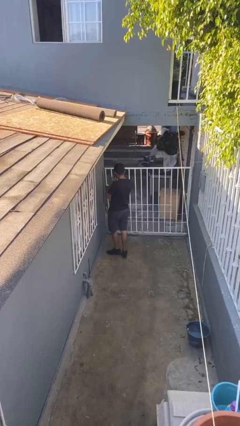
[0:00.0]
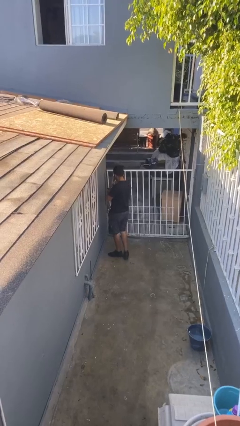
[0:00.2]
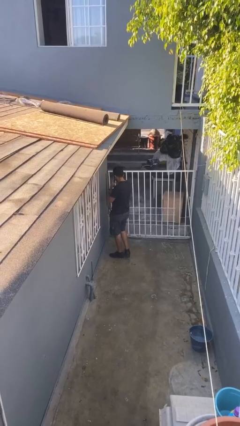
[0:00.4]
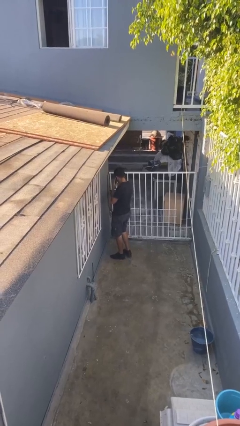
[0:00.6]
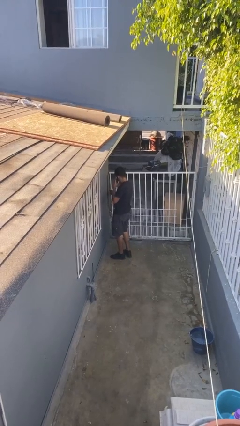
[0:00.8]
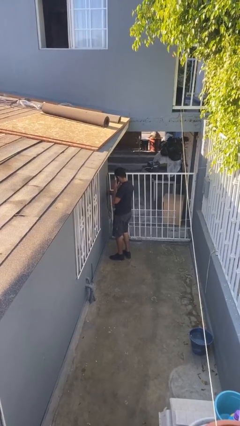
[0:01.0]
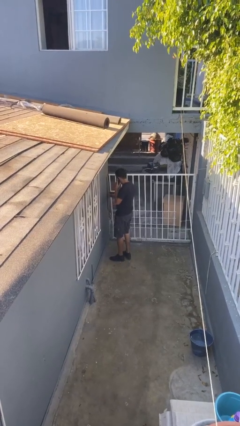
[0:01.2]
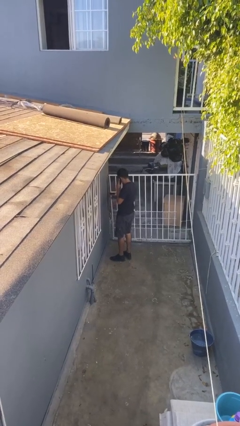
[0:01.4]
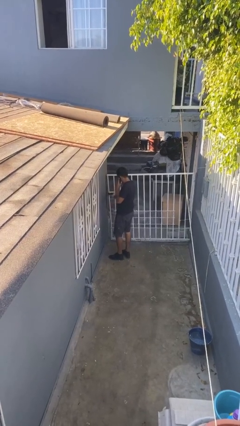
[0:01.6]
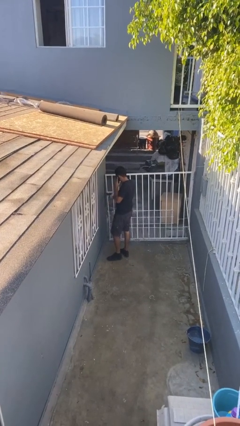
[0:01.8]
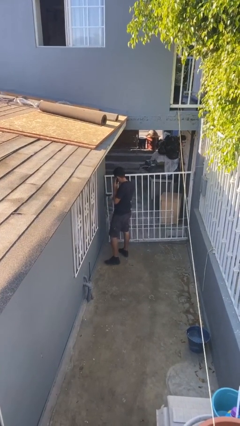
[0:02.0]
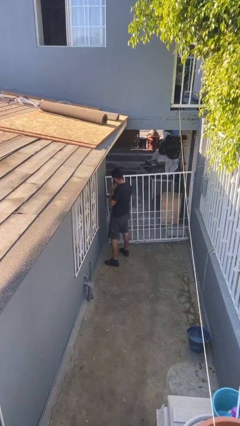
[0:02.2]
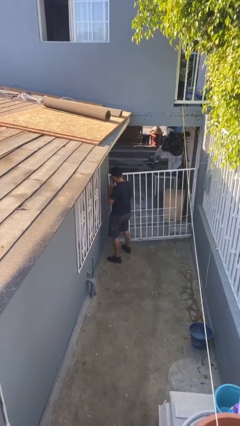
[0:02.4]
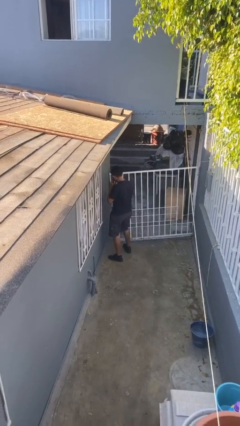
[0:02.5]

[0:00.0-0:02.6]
person opens facility door

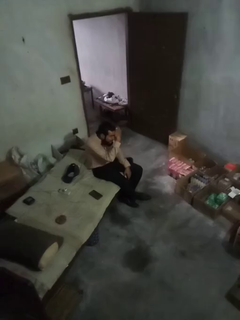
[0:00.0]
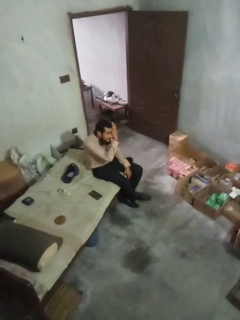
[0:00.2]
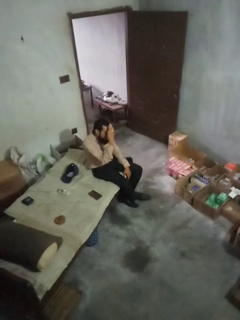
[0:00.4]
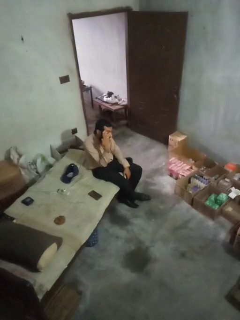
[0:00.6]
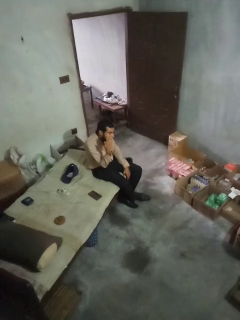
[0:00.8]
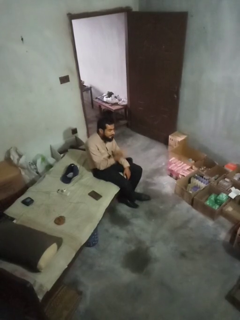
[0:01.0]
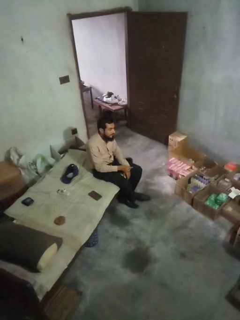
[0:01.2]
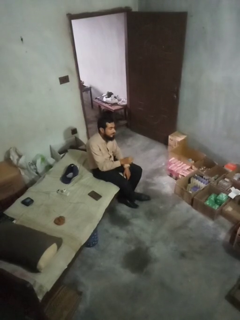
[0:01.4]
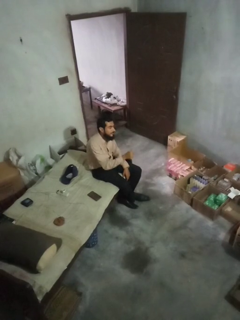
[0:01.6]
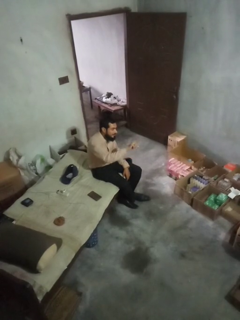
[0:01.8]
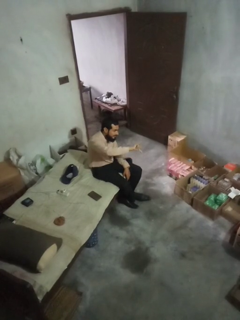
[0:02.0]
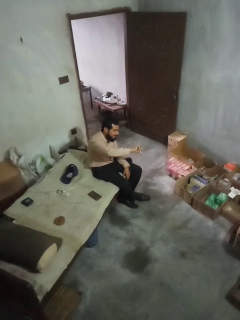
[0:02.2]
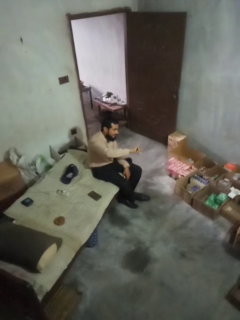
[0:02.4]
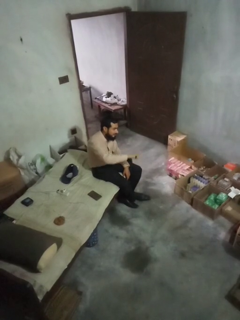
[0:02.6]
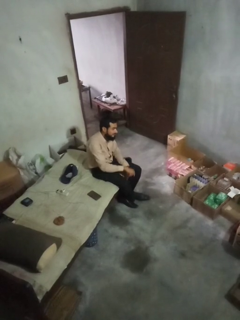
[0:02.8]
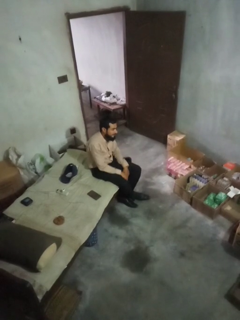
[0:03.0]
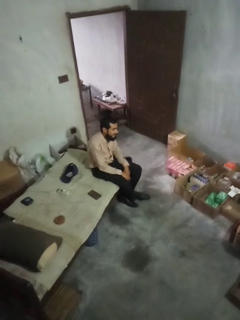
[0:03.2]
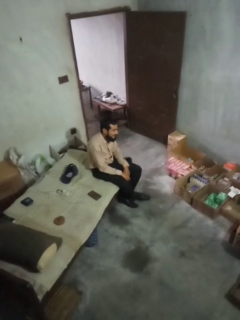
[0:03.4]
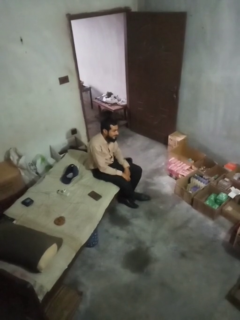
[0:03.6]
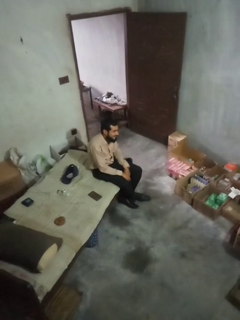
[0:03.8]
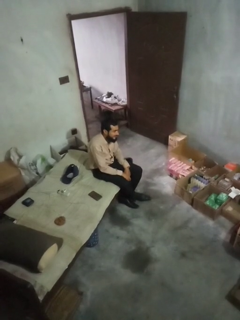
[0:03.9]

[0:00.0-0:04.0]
person gestures thumbs down

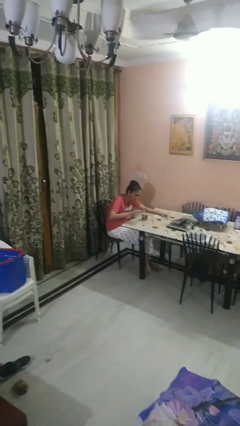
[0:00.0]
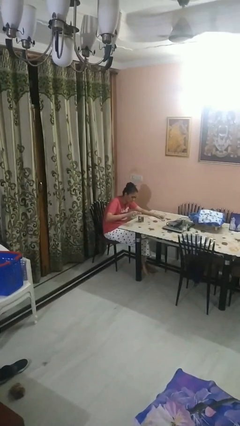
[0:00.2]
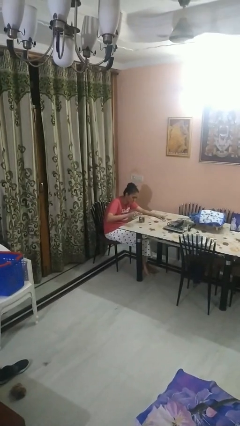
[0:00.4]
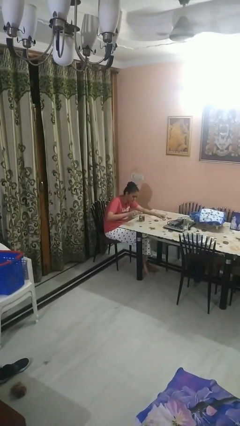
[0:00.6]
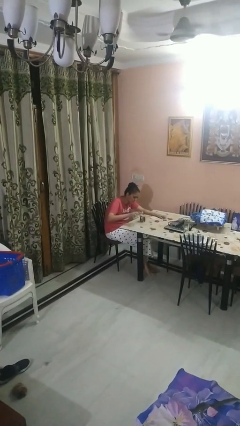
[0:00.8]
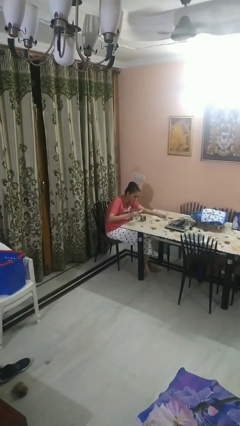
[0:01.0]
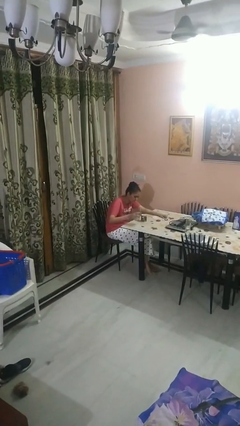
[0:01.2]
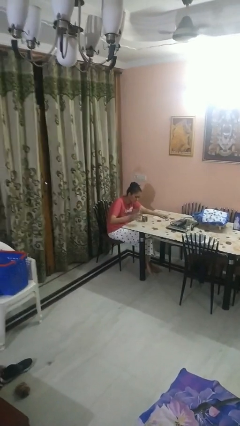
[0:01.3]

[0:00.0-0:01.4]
person pours liquid into cup

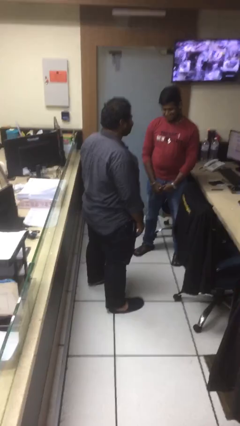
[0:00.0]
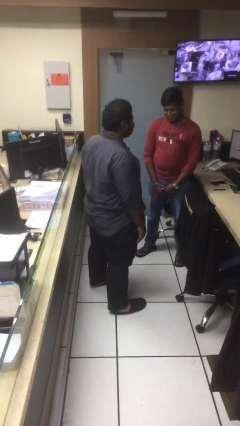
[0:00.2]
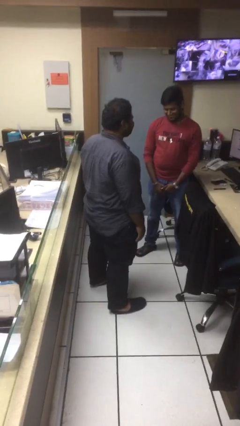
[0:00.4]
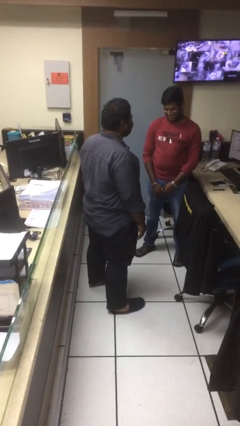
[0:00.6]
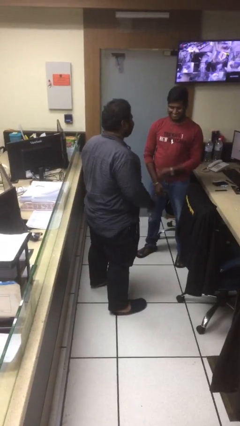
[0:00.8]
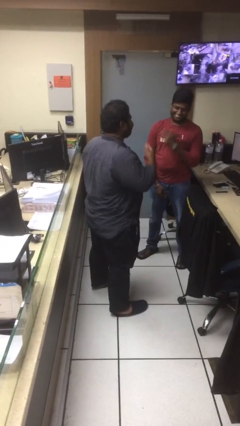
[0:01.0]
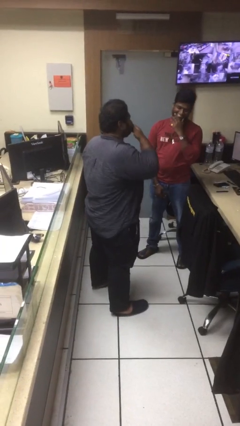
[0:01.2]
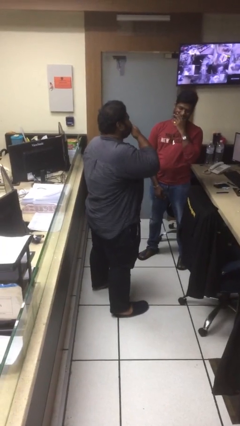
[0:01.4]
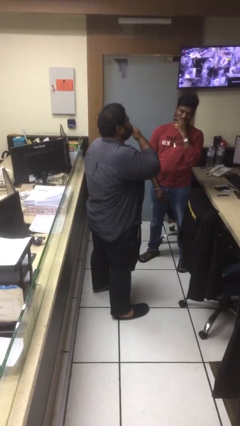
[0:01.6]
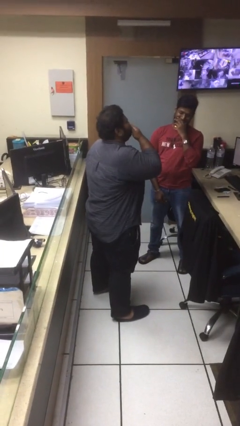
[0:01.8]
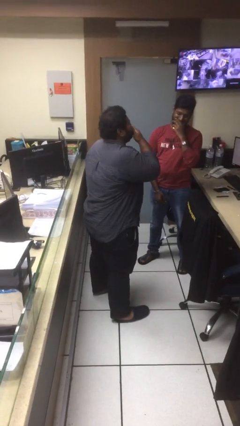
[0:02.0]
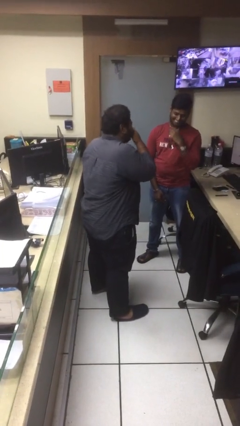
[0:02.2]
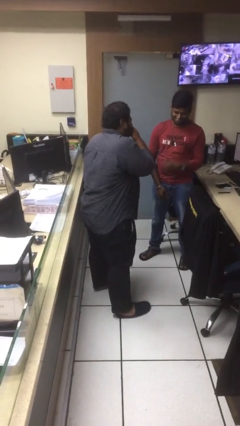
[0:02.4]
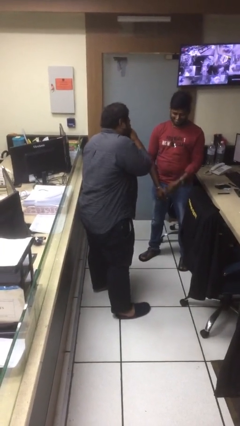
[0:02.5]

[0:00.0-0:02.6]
person laughs with person

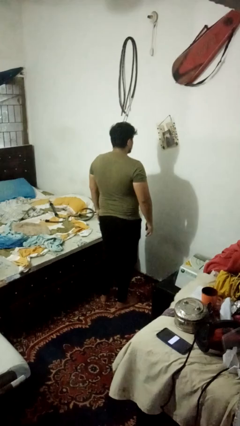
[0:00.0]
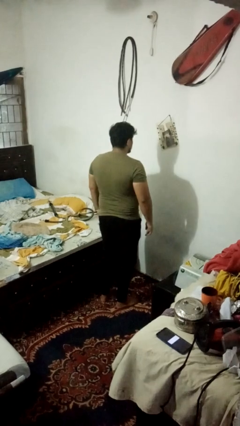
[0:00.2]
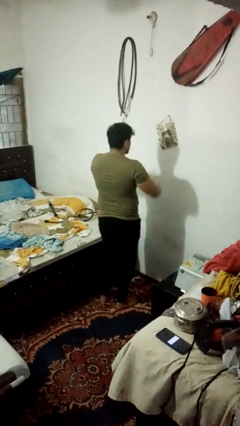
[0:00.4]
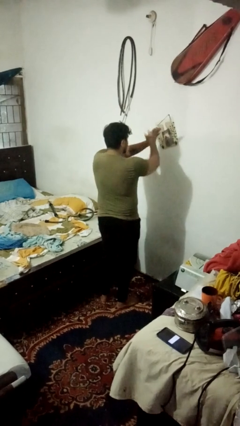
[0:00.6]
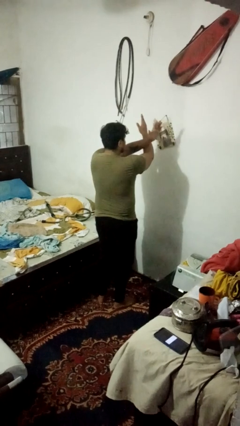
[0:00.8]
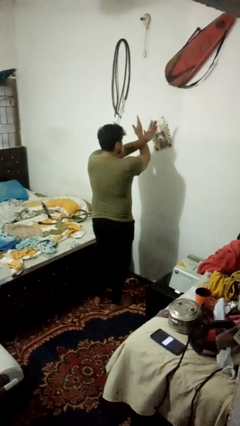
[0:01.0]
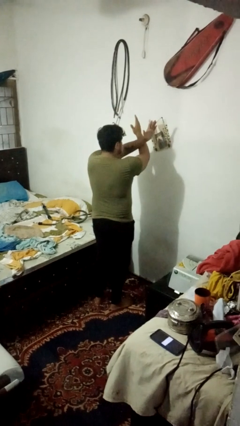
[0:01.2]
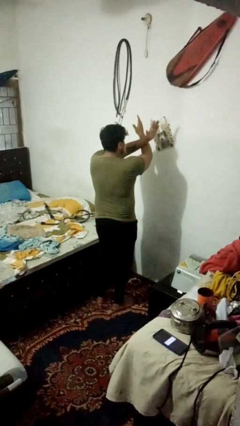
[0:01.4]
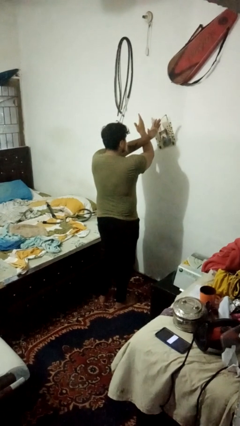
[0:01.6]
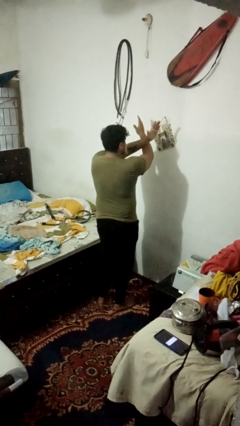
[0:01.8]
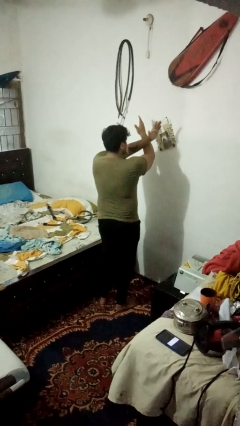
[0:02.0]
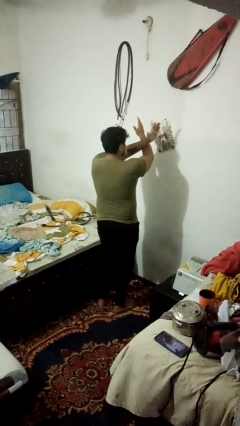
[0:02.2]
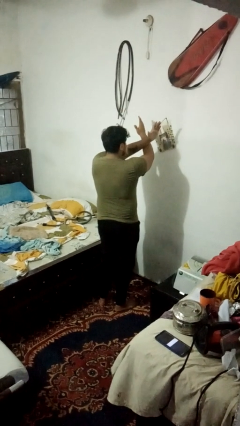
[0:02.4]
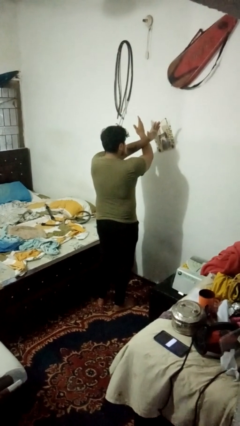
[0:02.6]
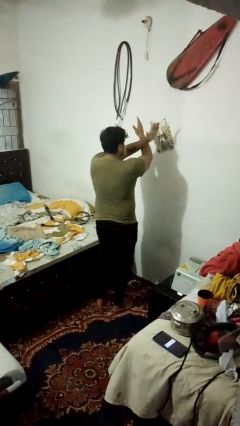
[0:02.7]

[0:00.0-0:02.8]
person gestures arms x

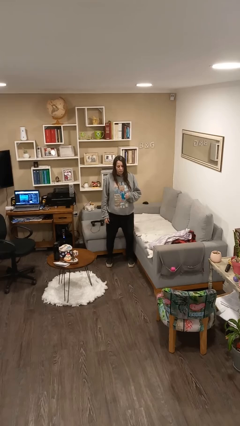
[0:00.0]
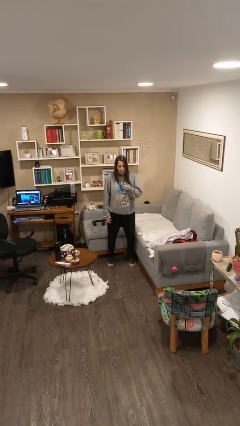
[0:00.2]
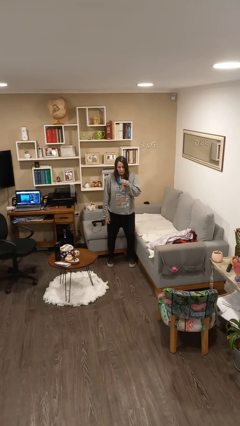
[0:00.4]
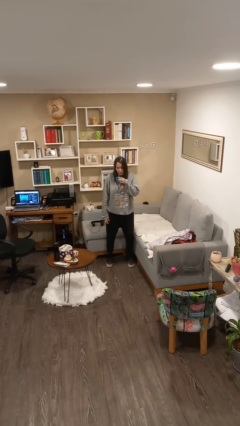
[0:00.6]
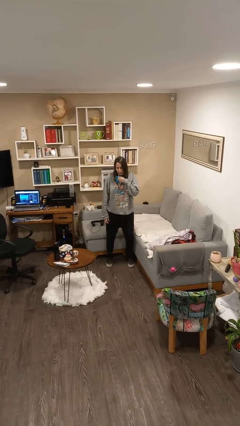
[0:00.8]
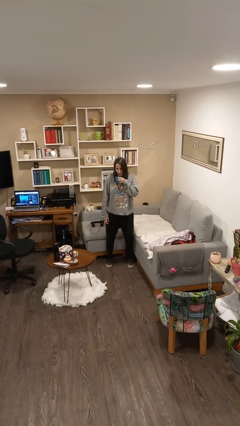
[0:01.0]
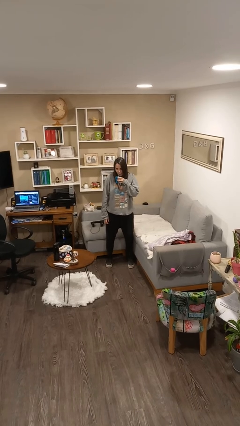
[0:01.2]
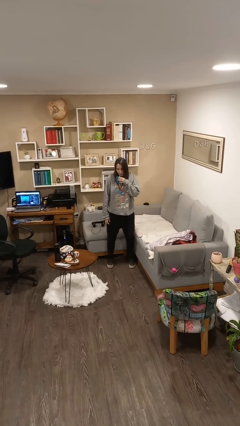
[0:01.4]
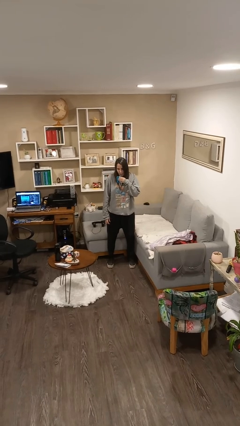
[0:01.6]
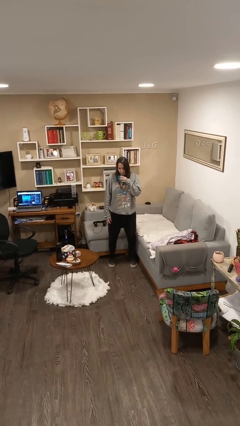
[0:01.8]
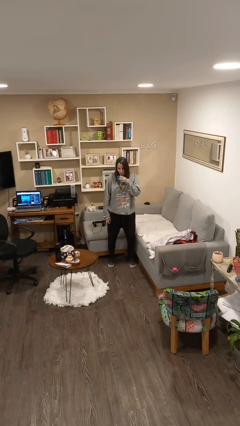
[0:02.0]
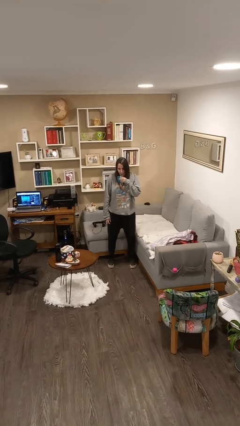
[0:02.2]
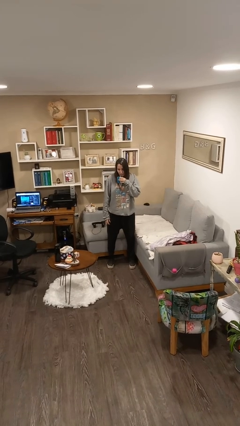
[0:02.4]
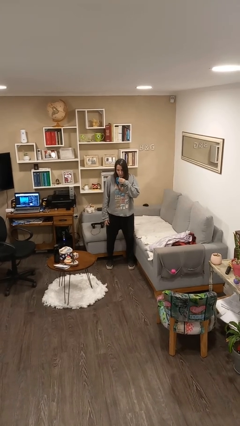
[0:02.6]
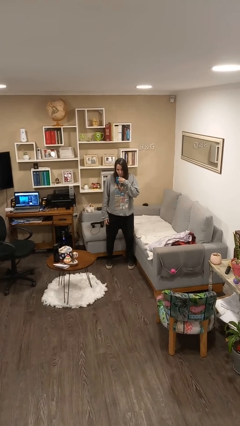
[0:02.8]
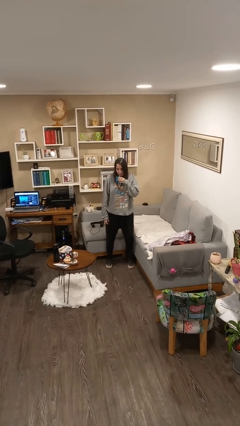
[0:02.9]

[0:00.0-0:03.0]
person drinks from straw

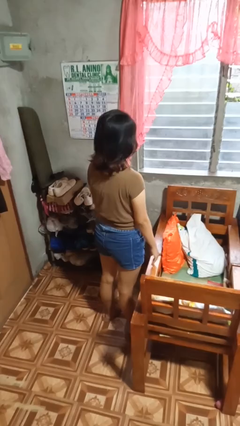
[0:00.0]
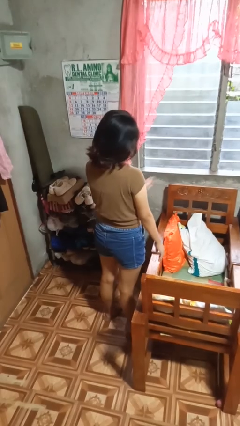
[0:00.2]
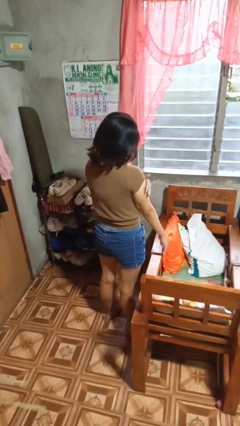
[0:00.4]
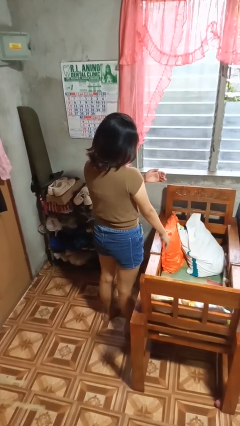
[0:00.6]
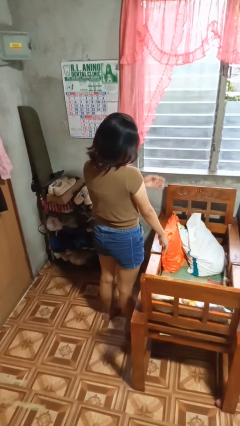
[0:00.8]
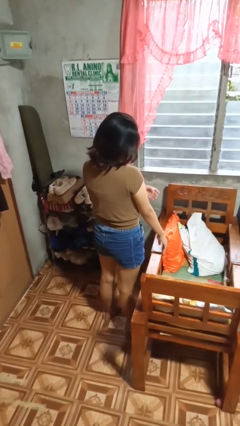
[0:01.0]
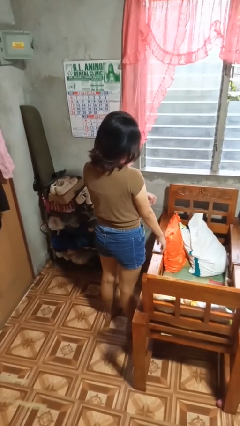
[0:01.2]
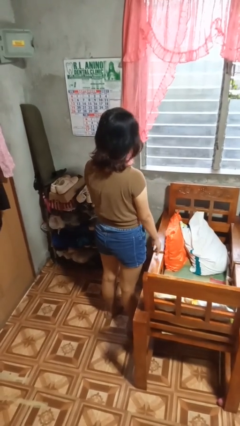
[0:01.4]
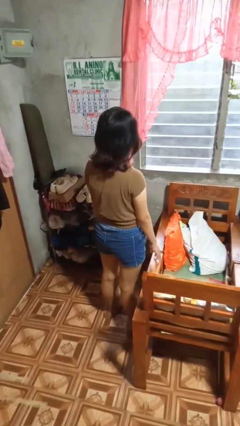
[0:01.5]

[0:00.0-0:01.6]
person swats bug

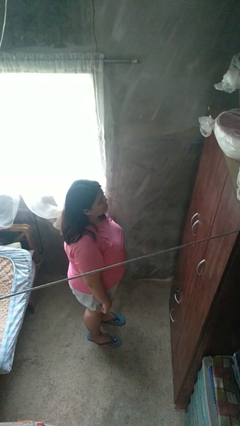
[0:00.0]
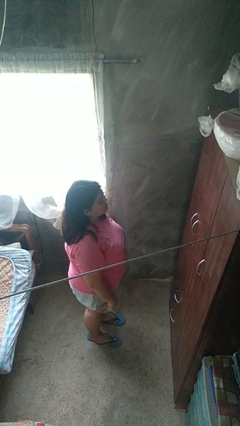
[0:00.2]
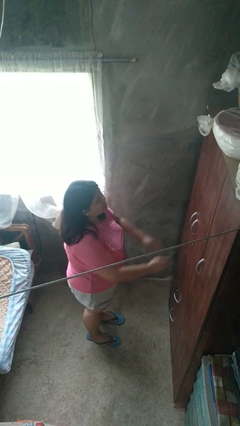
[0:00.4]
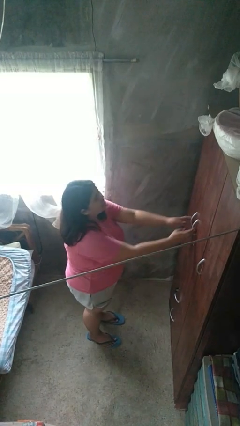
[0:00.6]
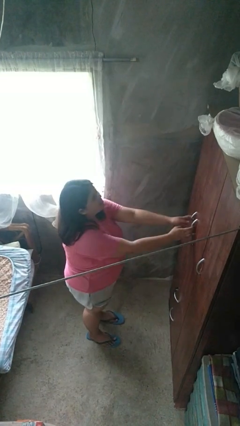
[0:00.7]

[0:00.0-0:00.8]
person opens closet door
